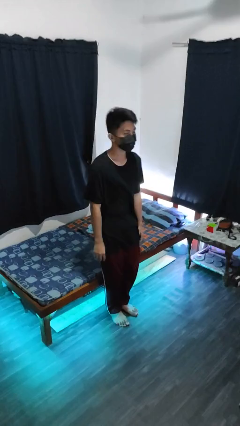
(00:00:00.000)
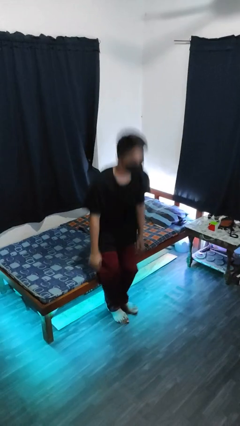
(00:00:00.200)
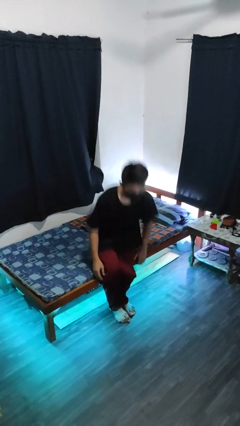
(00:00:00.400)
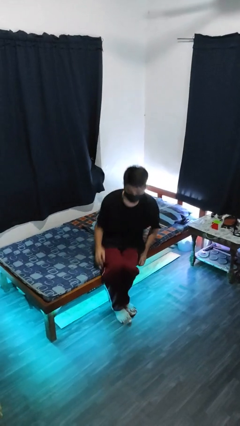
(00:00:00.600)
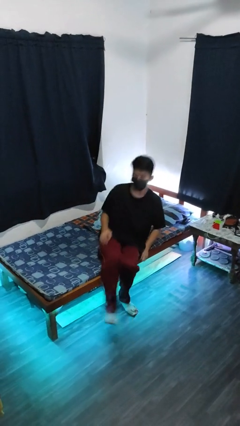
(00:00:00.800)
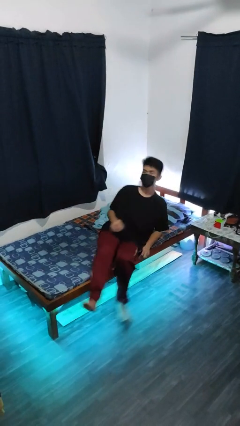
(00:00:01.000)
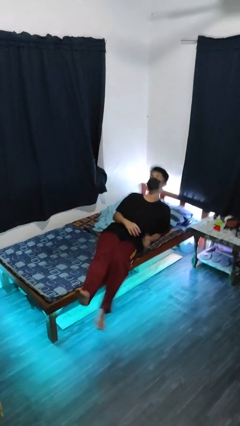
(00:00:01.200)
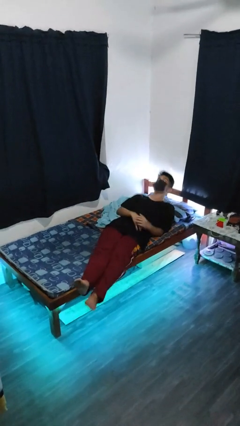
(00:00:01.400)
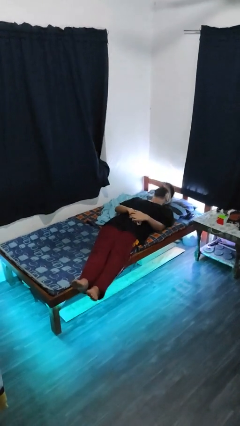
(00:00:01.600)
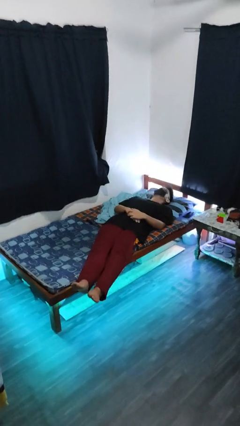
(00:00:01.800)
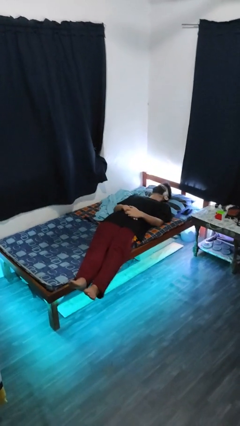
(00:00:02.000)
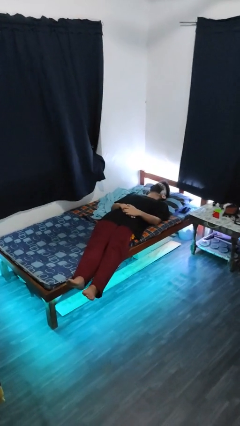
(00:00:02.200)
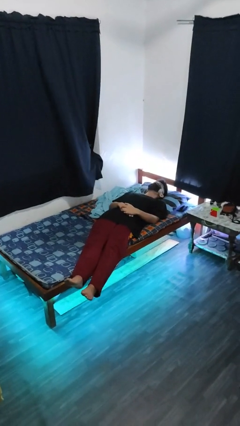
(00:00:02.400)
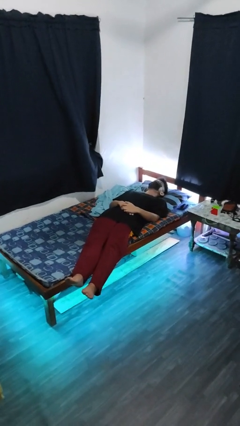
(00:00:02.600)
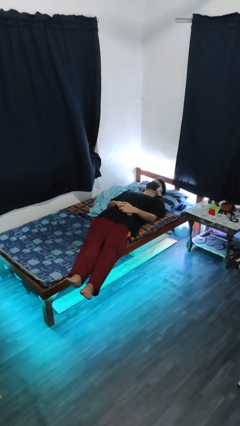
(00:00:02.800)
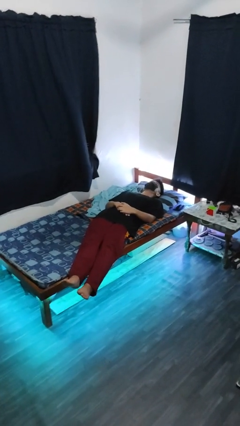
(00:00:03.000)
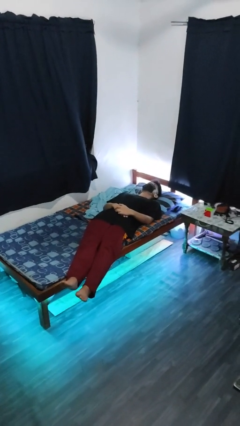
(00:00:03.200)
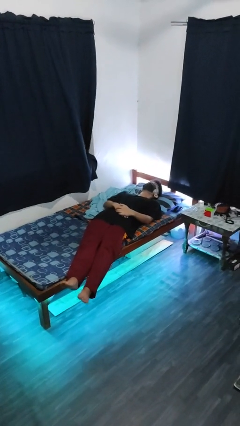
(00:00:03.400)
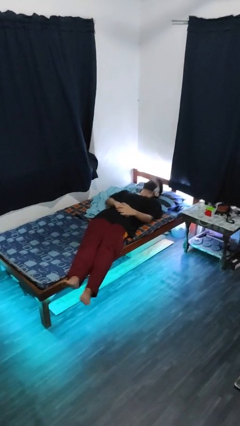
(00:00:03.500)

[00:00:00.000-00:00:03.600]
person lies down on bed

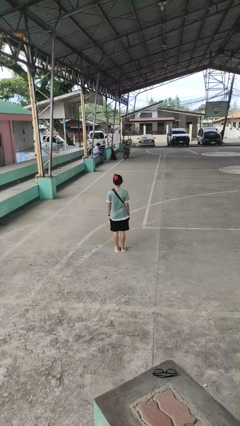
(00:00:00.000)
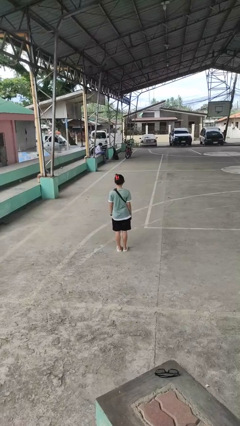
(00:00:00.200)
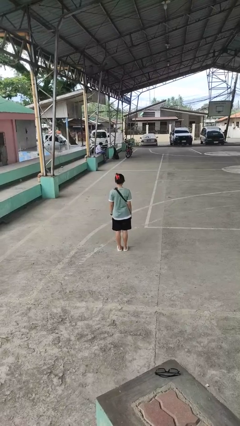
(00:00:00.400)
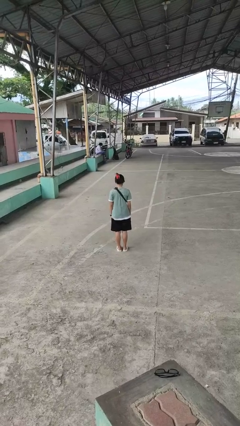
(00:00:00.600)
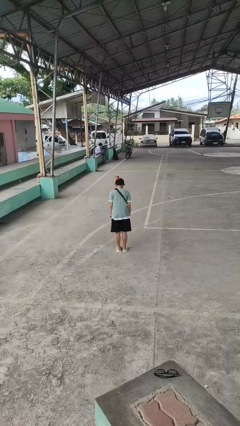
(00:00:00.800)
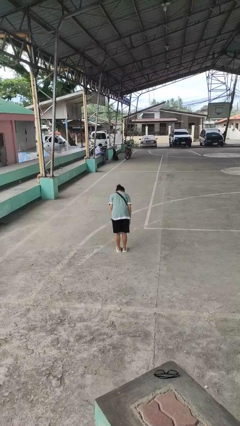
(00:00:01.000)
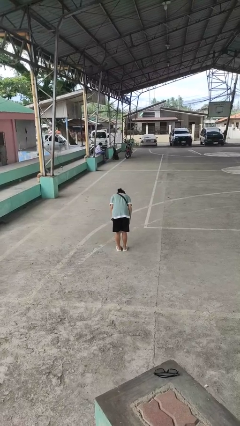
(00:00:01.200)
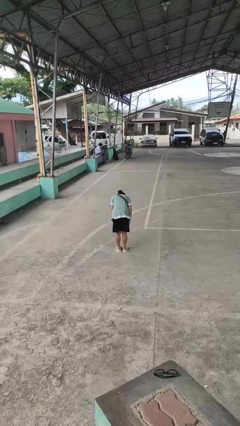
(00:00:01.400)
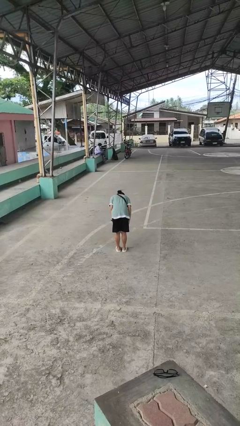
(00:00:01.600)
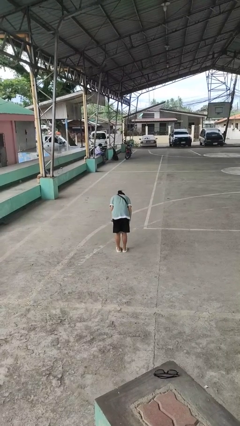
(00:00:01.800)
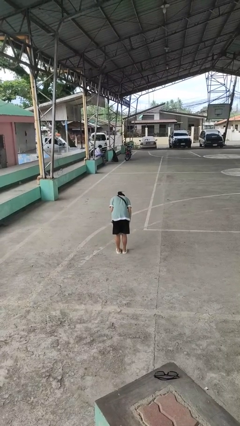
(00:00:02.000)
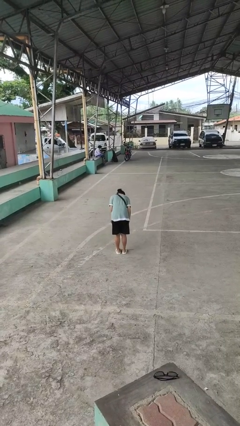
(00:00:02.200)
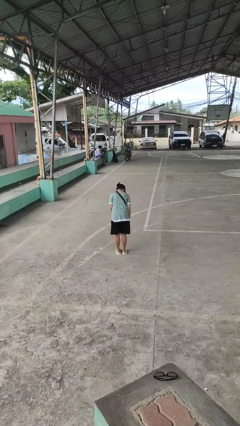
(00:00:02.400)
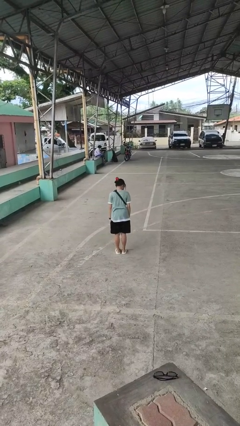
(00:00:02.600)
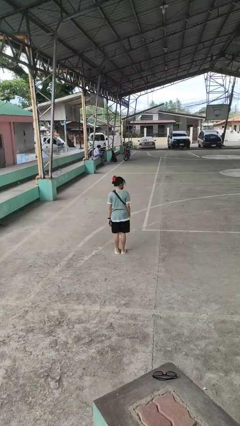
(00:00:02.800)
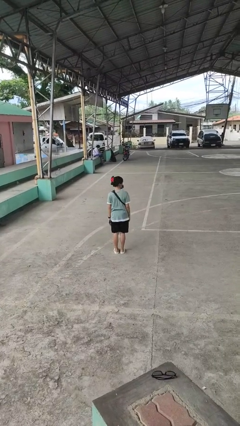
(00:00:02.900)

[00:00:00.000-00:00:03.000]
person bows

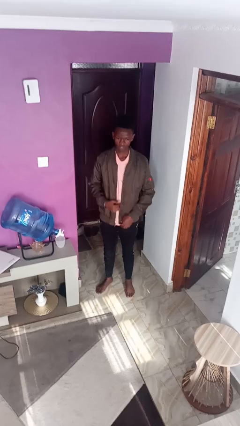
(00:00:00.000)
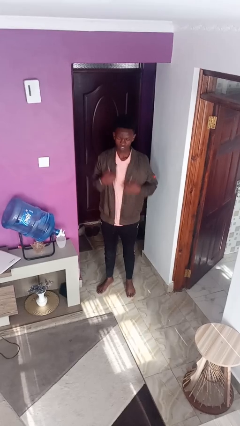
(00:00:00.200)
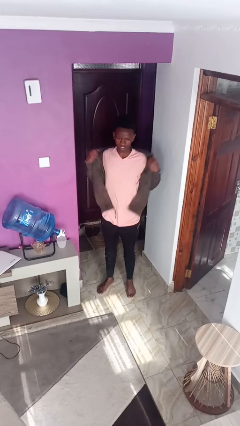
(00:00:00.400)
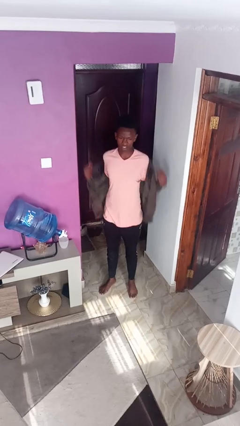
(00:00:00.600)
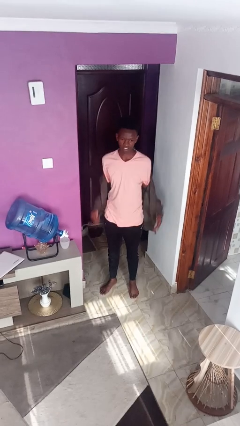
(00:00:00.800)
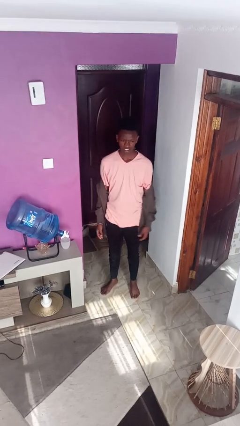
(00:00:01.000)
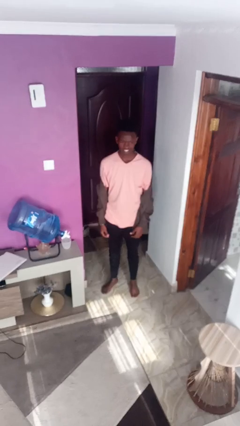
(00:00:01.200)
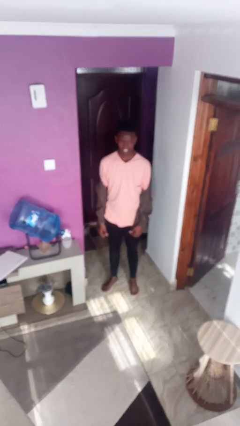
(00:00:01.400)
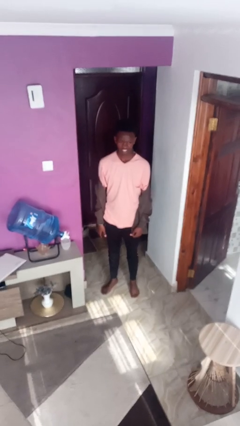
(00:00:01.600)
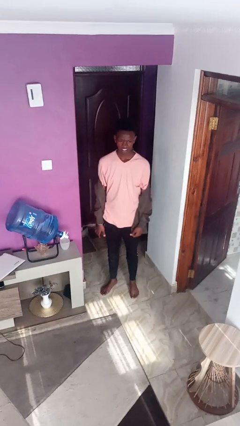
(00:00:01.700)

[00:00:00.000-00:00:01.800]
person takes off jacket

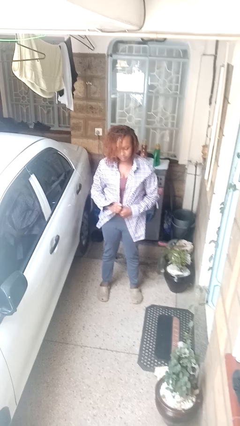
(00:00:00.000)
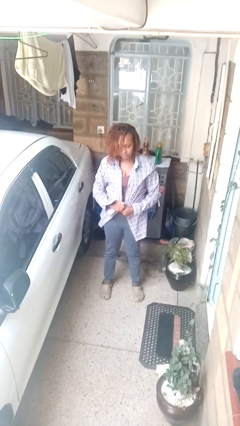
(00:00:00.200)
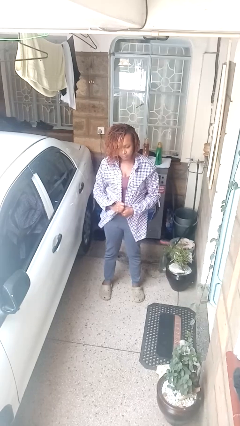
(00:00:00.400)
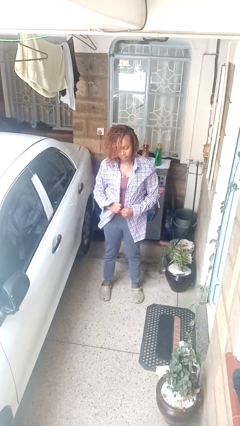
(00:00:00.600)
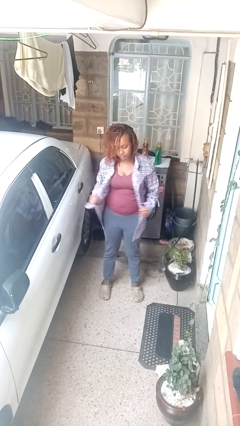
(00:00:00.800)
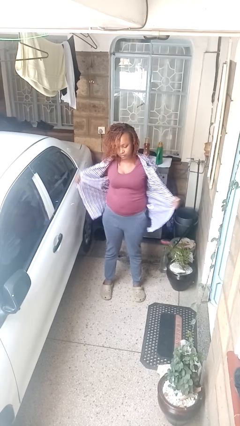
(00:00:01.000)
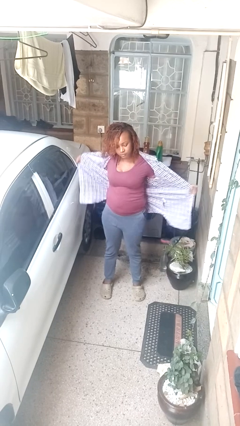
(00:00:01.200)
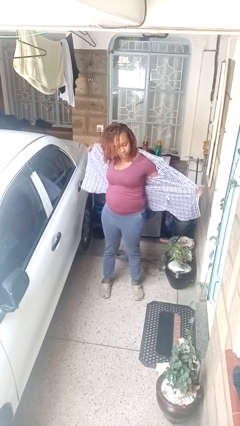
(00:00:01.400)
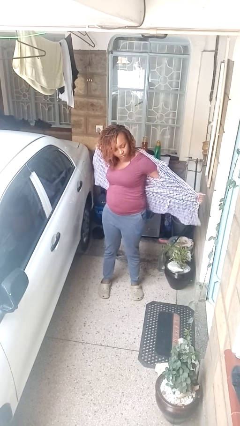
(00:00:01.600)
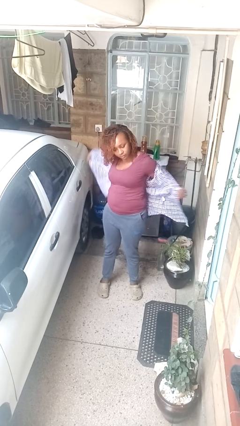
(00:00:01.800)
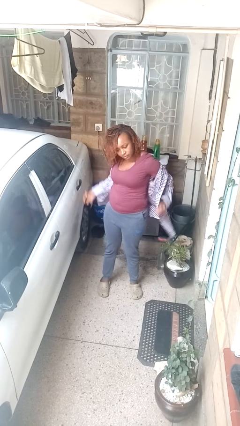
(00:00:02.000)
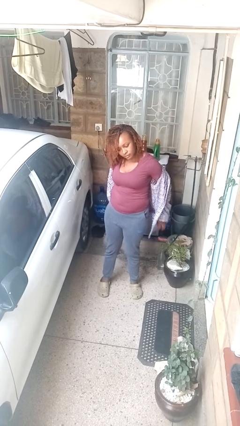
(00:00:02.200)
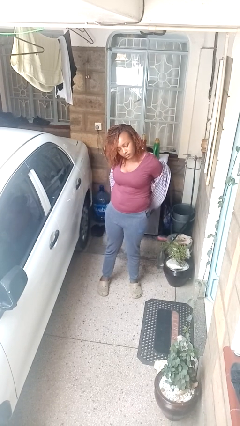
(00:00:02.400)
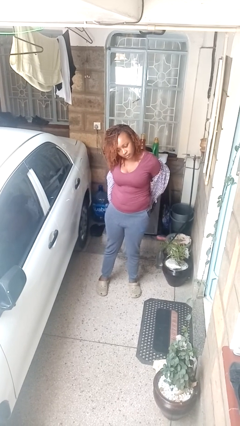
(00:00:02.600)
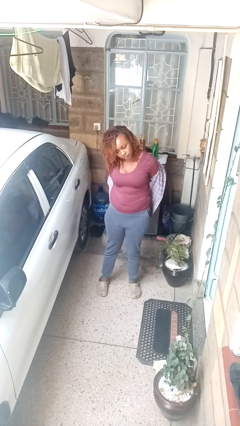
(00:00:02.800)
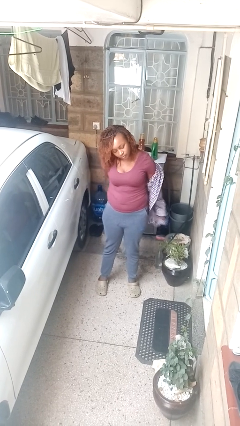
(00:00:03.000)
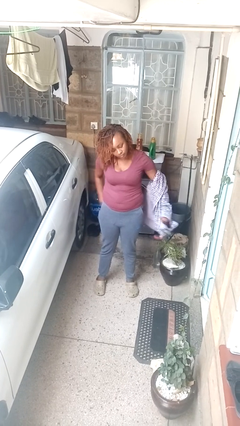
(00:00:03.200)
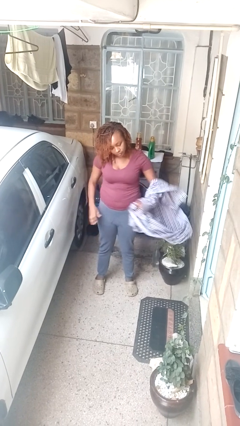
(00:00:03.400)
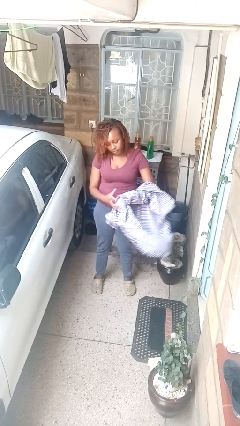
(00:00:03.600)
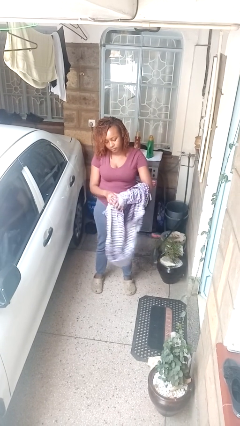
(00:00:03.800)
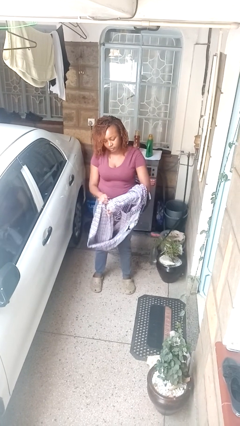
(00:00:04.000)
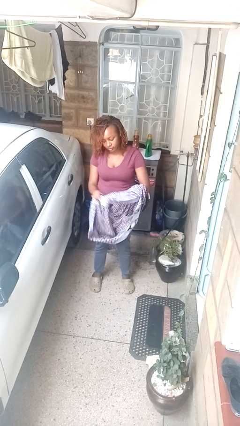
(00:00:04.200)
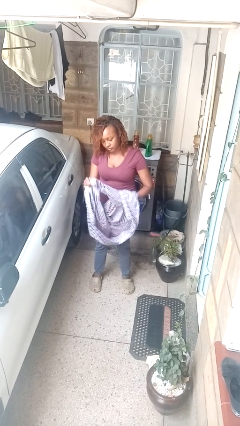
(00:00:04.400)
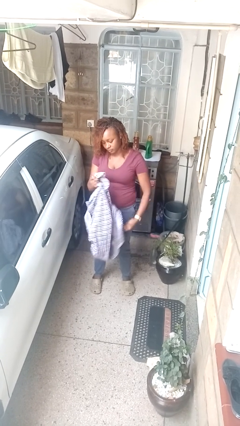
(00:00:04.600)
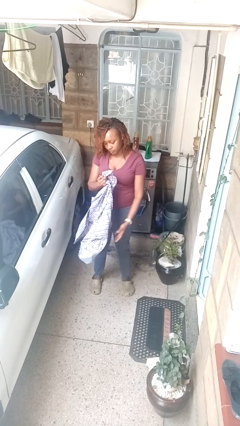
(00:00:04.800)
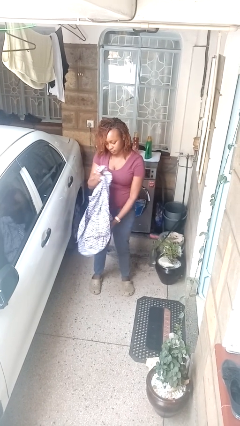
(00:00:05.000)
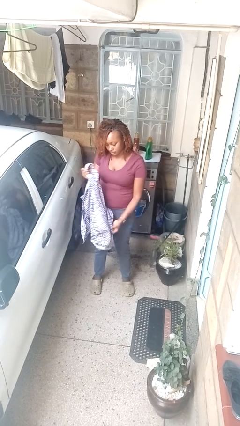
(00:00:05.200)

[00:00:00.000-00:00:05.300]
person takes off shirt

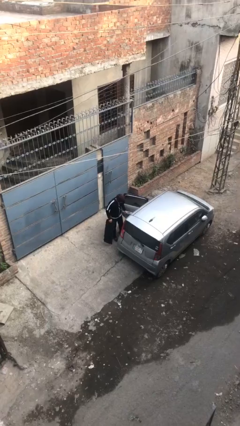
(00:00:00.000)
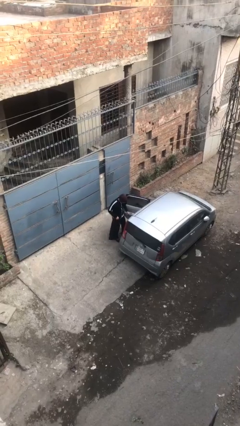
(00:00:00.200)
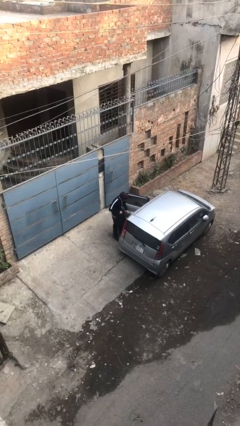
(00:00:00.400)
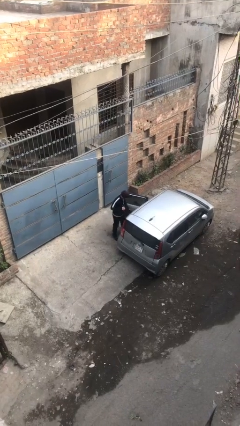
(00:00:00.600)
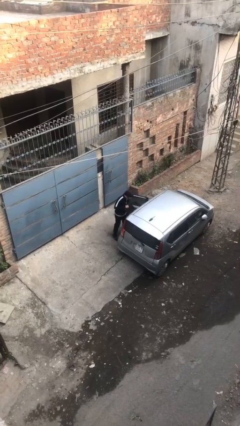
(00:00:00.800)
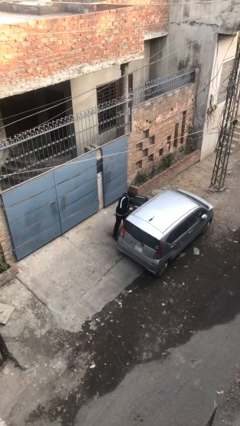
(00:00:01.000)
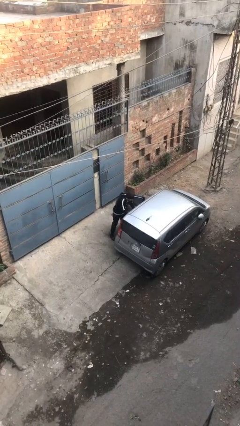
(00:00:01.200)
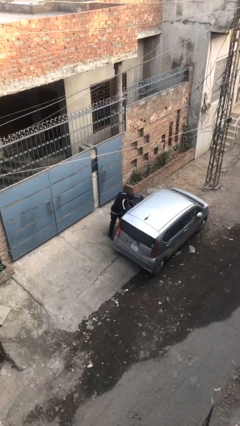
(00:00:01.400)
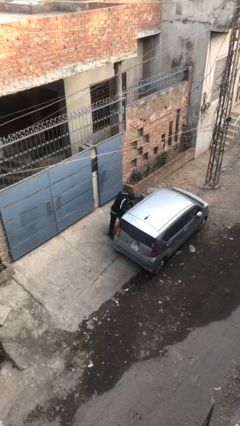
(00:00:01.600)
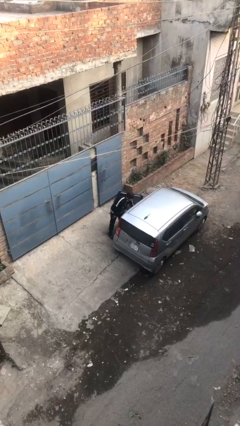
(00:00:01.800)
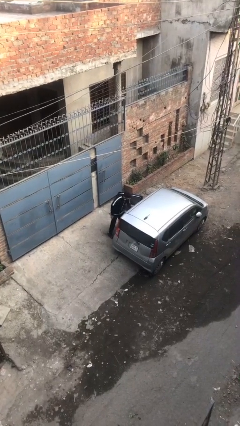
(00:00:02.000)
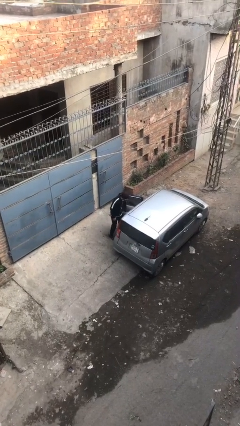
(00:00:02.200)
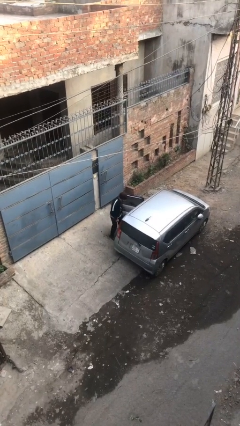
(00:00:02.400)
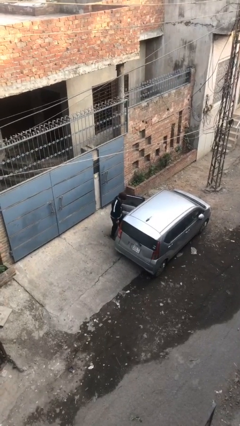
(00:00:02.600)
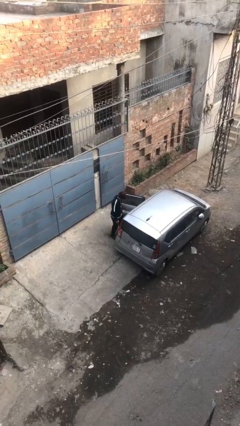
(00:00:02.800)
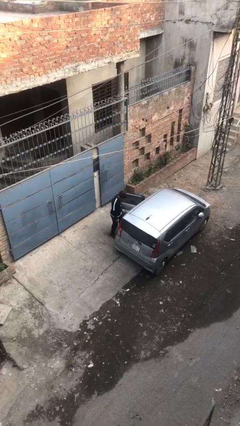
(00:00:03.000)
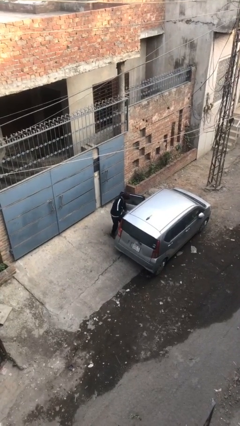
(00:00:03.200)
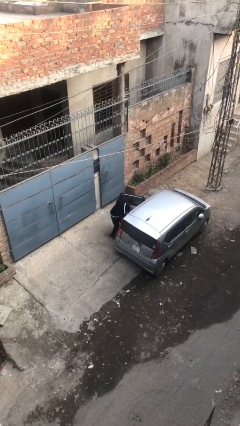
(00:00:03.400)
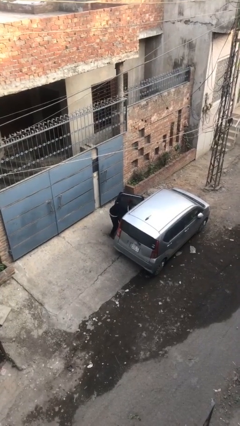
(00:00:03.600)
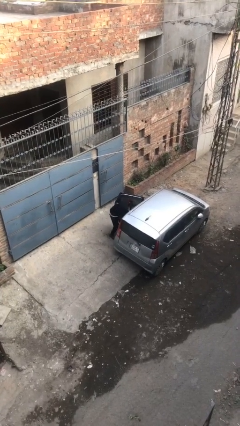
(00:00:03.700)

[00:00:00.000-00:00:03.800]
person loads car
